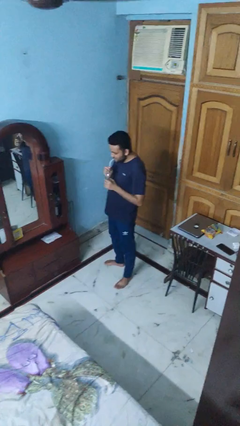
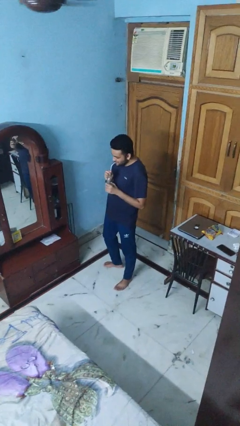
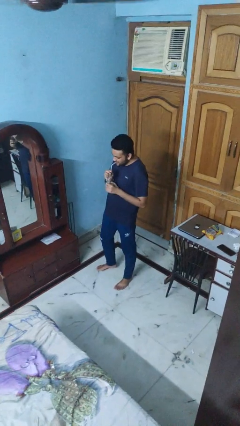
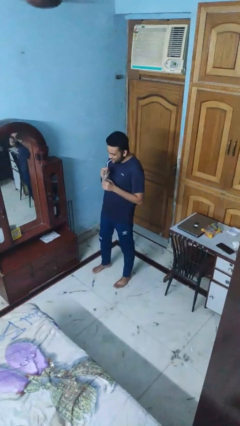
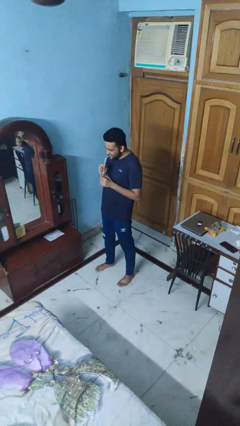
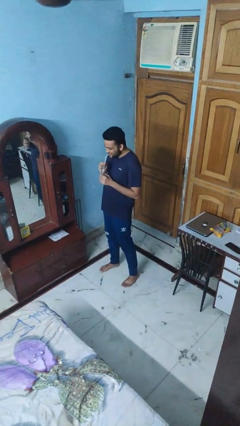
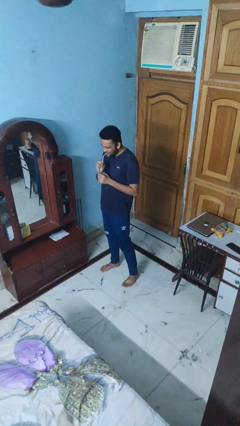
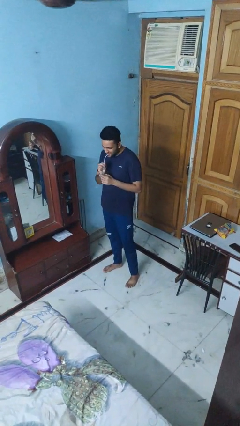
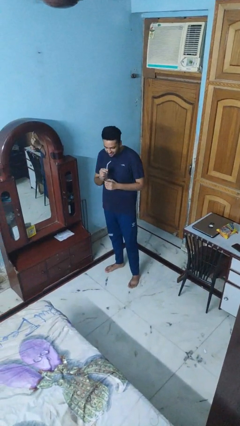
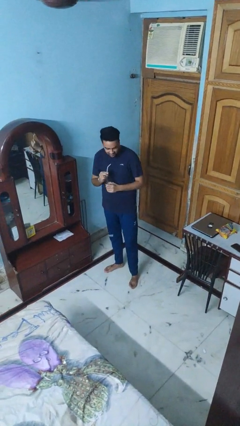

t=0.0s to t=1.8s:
person drinks from straw

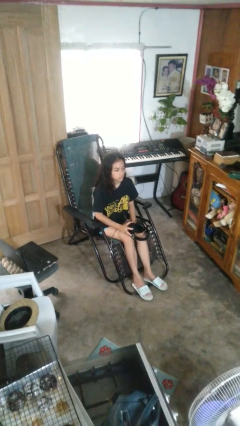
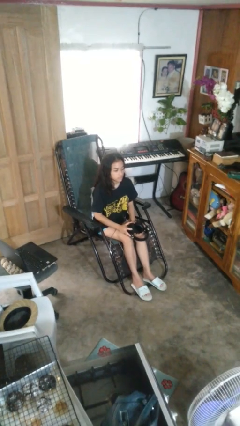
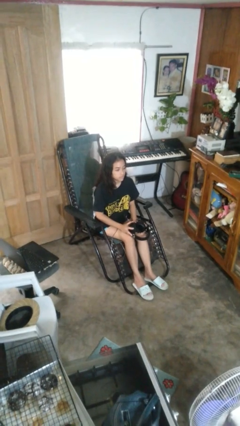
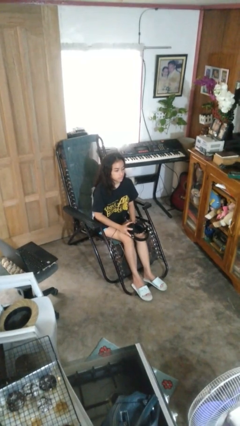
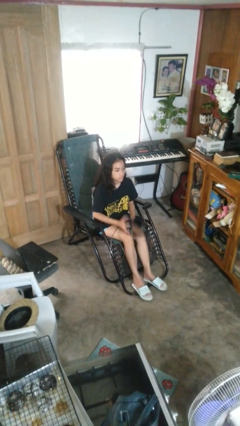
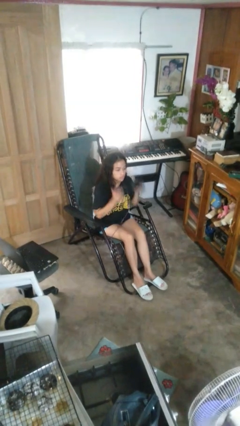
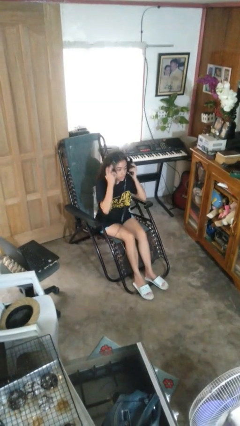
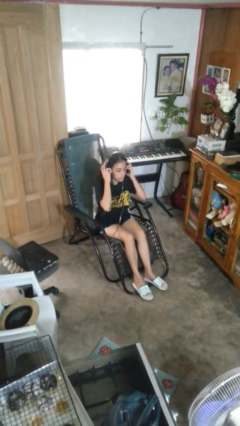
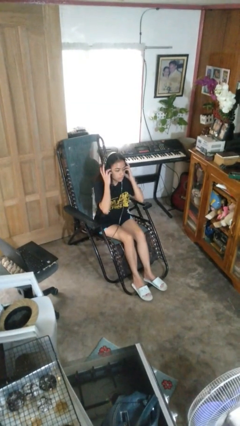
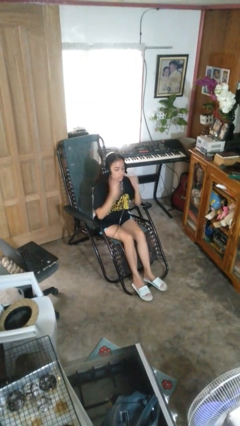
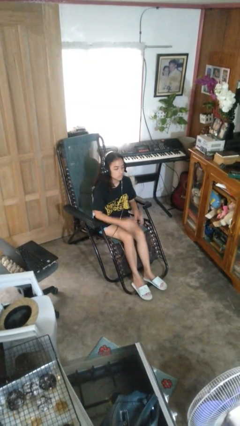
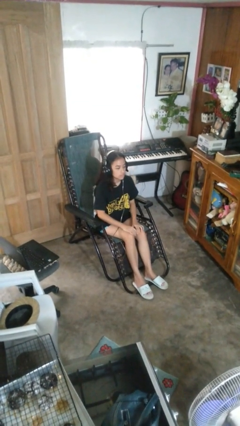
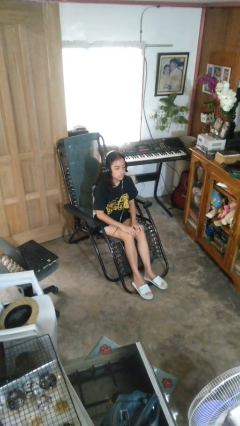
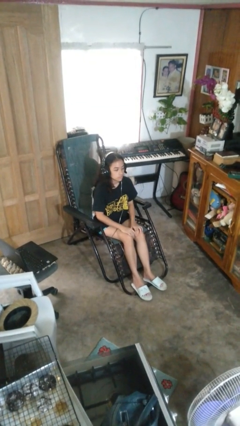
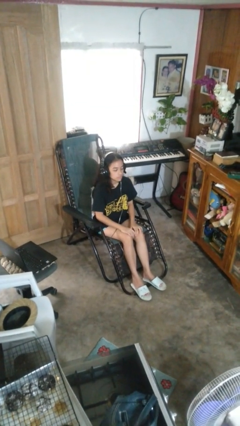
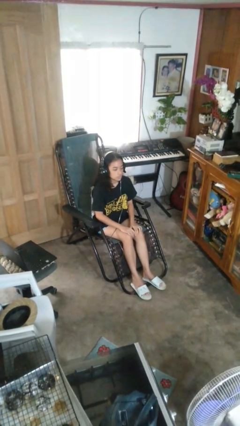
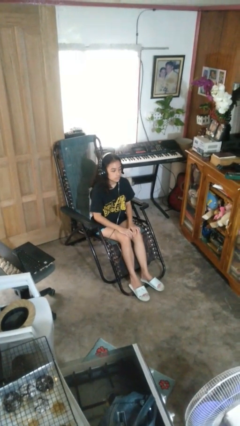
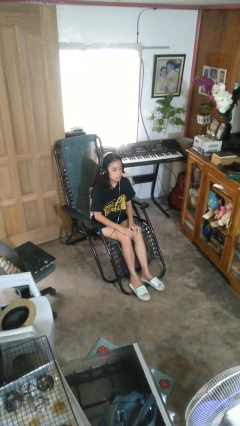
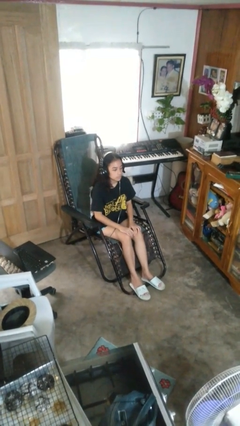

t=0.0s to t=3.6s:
person puts on headphones

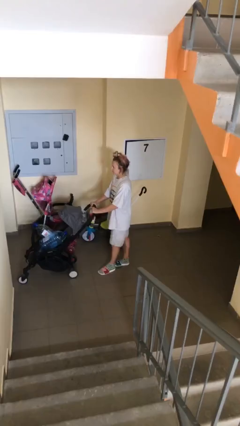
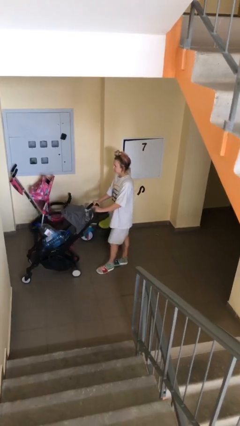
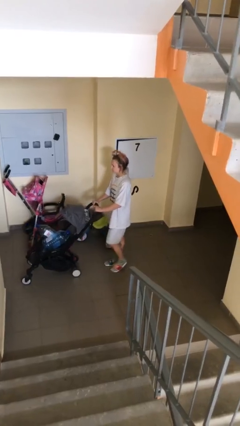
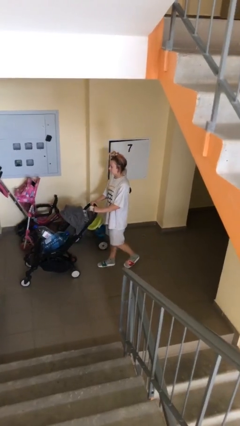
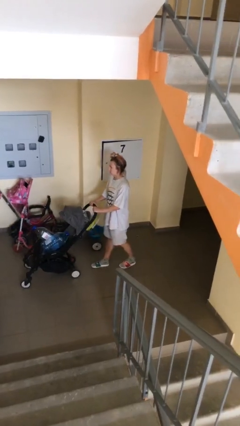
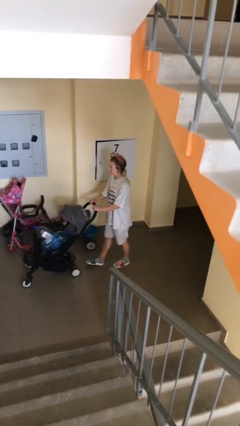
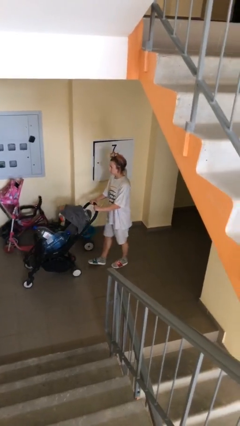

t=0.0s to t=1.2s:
person pulls wheeled cart

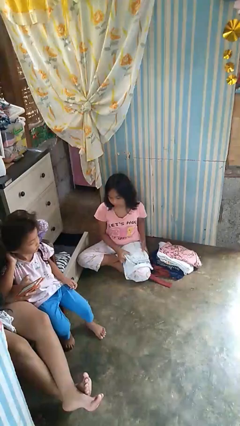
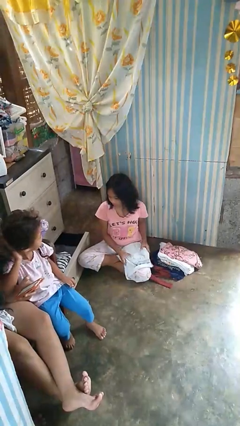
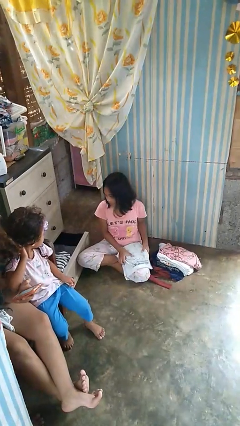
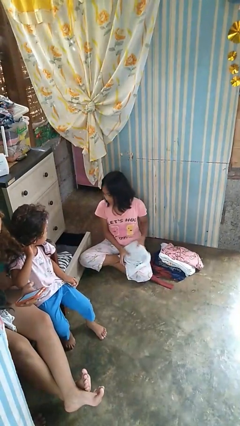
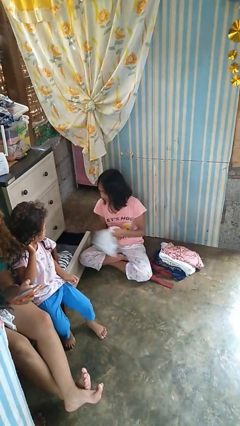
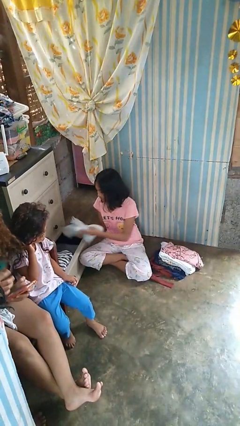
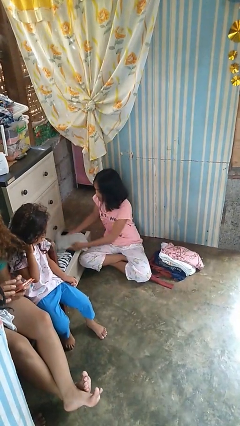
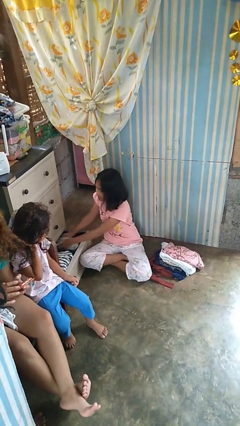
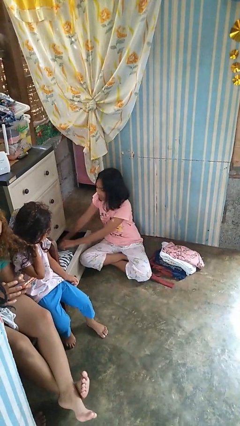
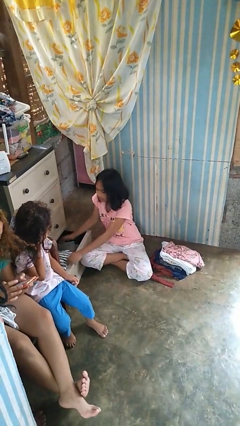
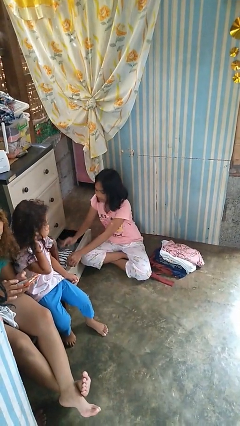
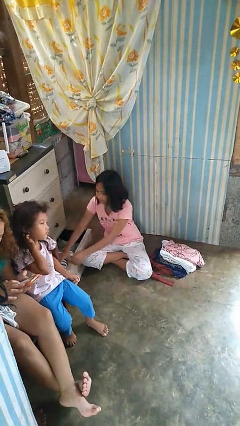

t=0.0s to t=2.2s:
person puts clothes into dresser

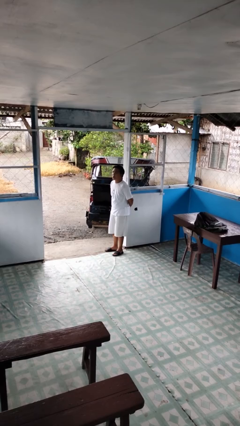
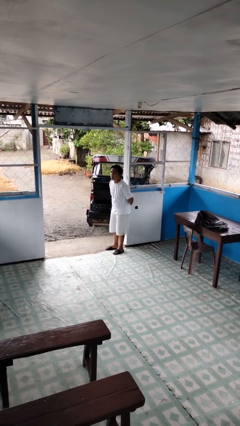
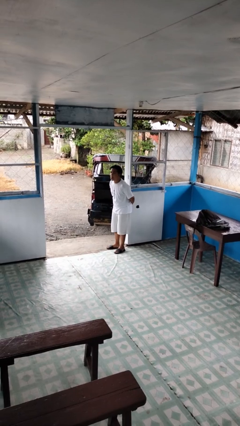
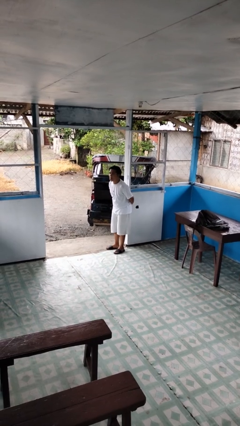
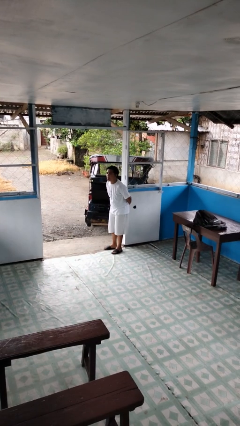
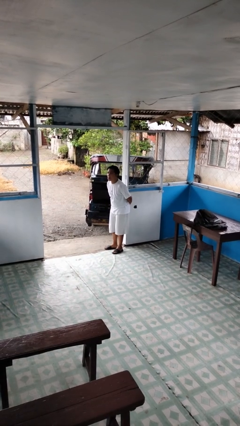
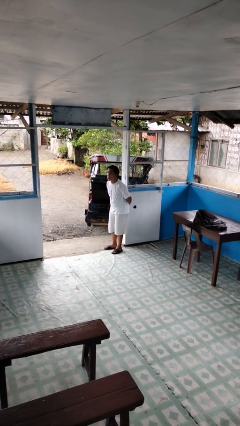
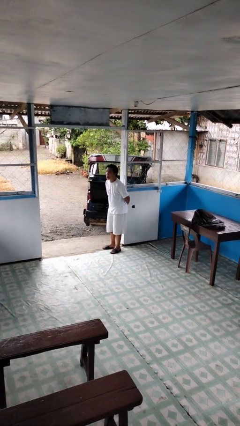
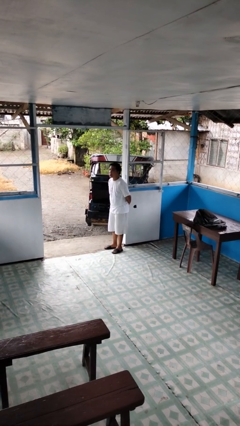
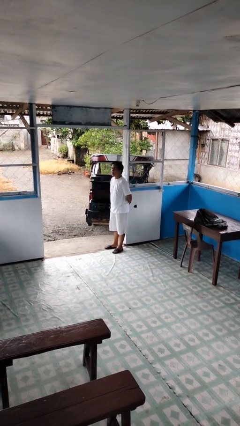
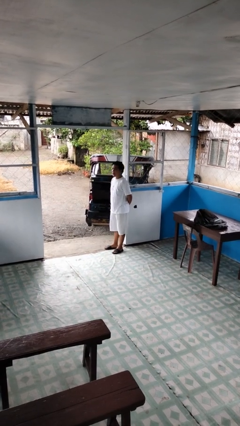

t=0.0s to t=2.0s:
person sticks out tongue

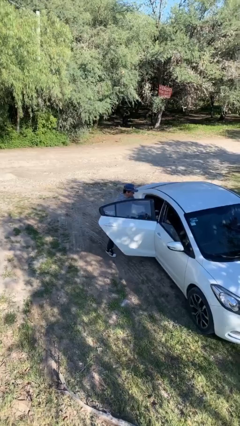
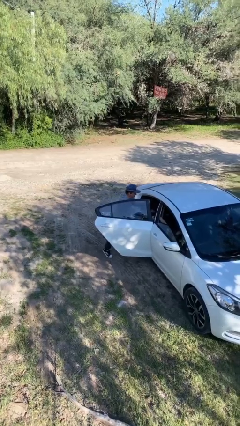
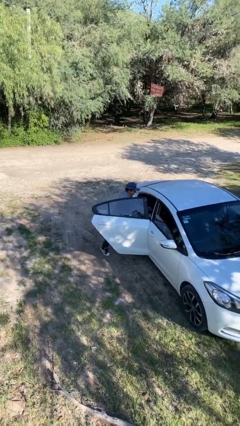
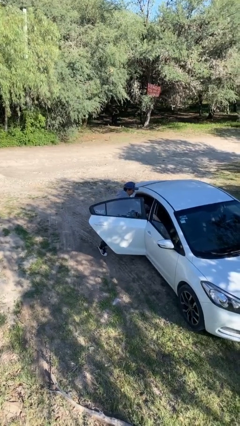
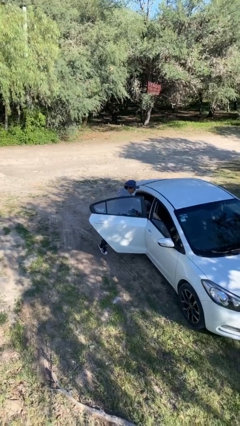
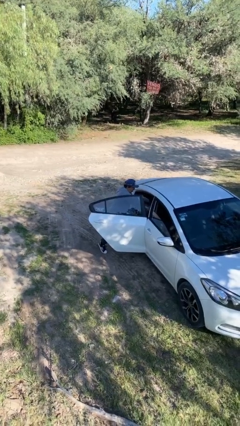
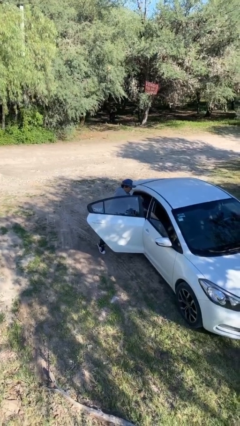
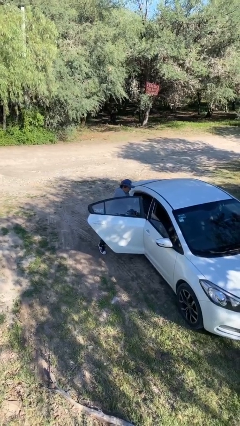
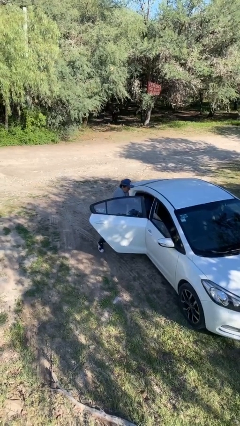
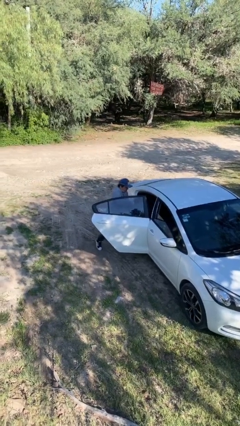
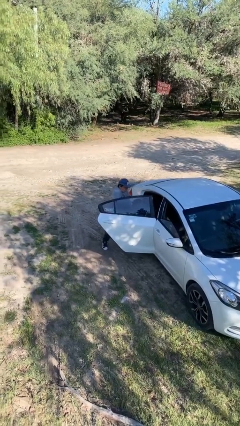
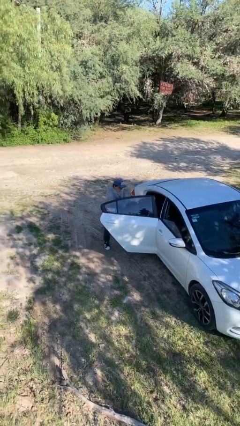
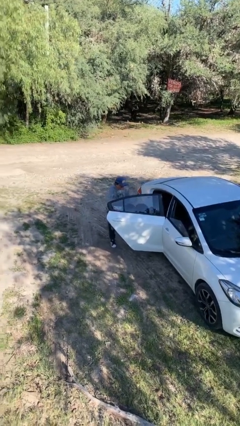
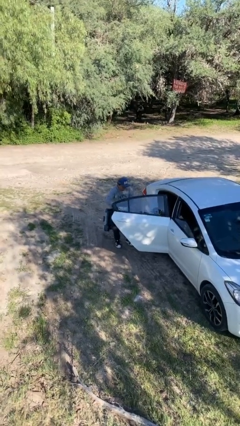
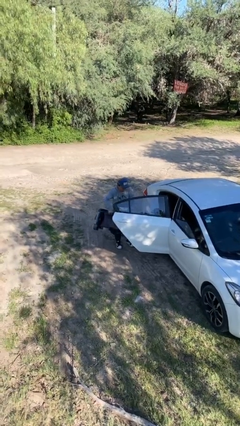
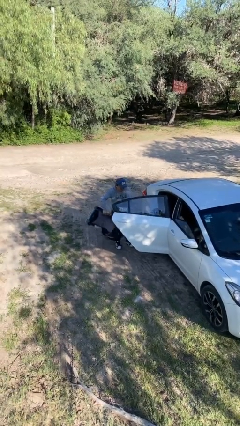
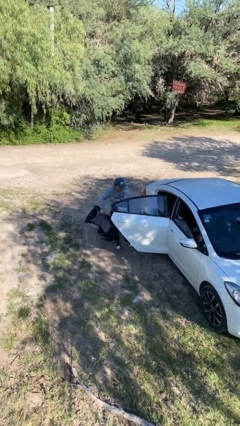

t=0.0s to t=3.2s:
person unloads car

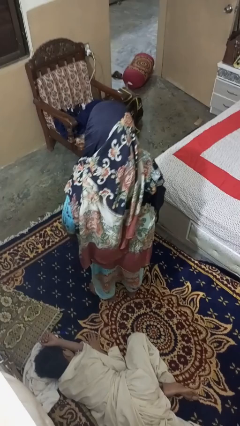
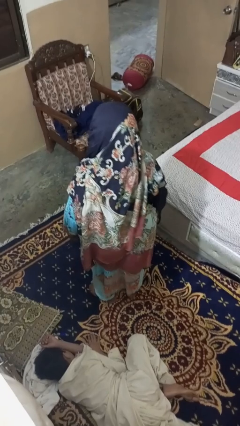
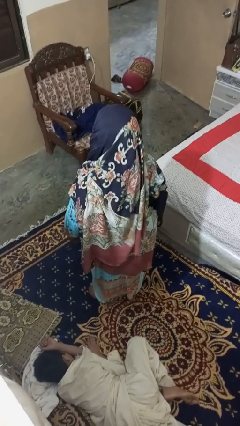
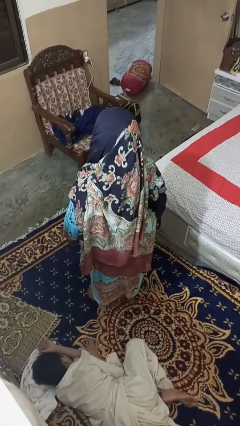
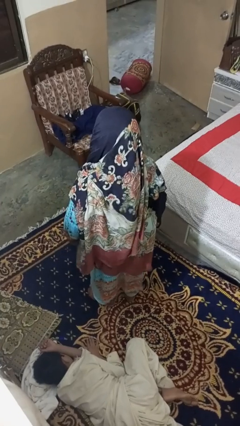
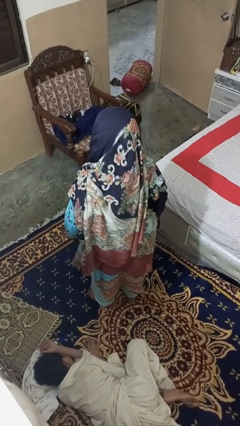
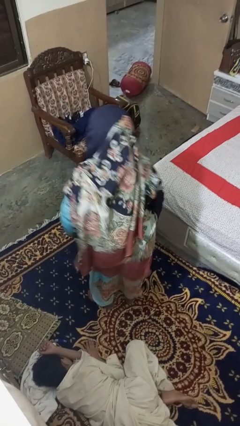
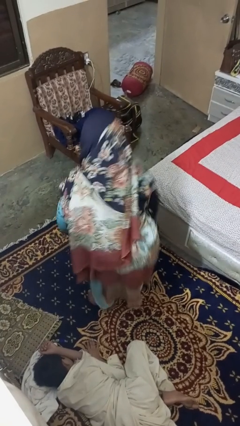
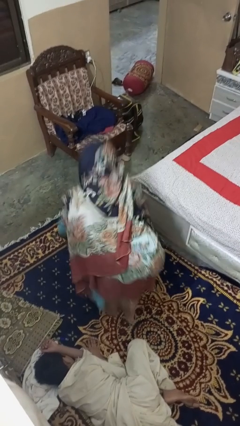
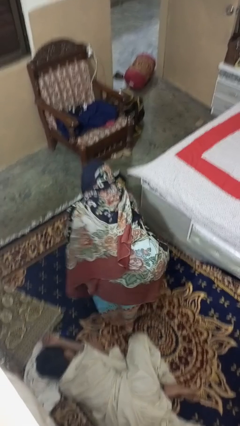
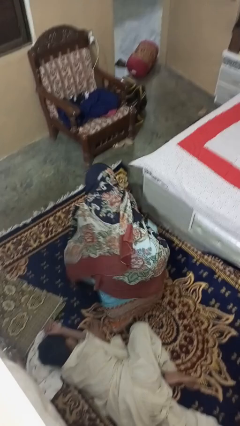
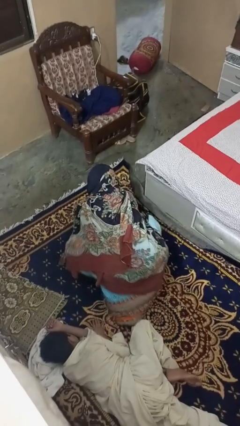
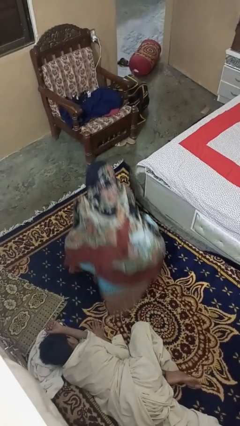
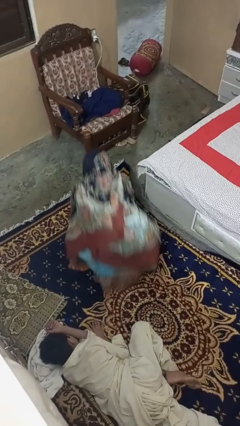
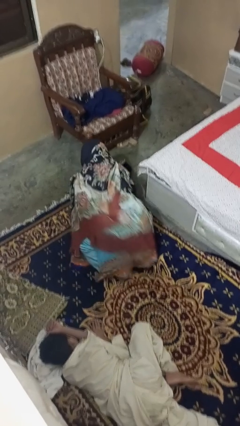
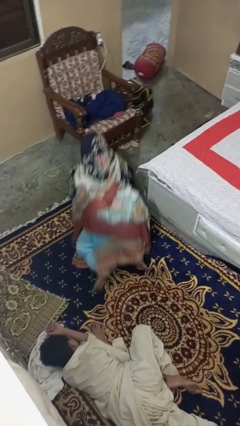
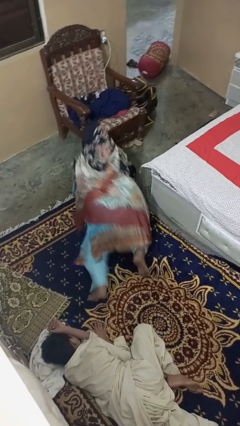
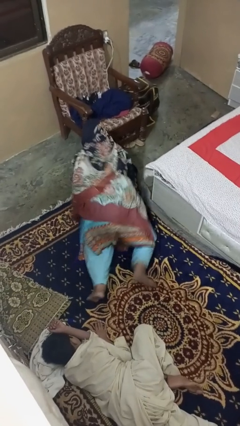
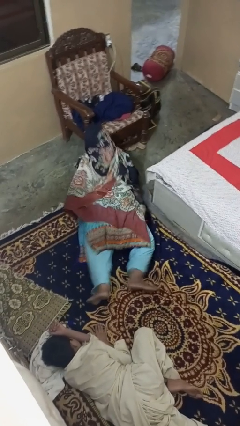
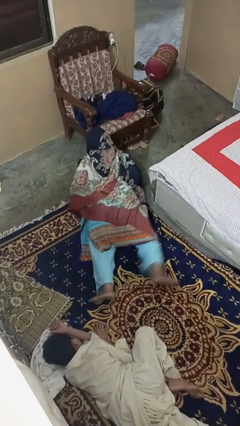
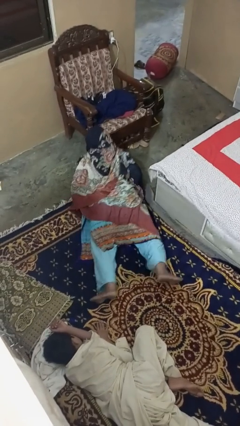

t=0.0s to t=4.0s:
person exercises with pushup
